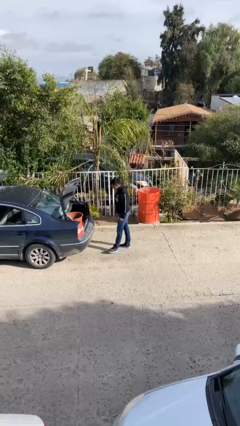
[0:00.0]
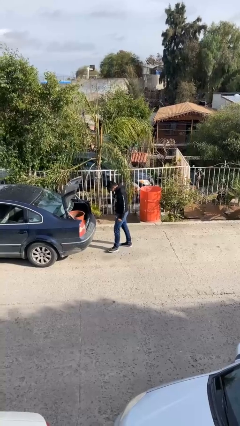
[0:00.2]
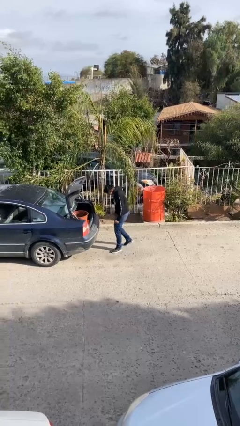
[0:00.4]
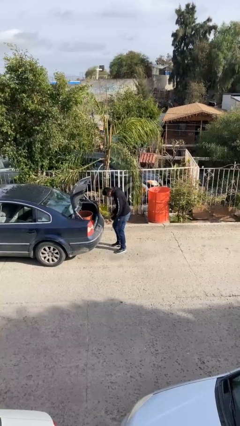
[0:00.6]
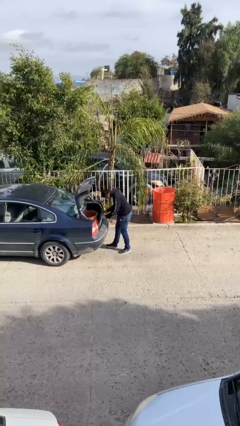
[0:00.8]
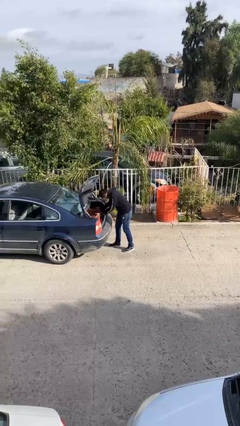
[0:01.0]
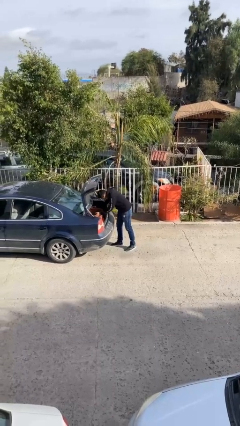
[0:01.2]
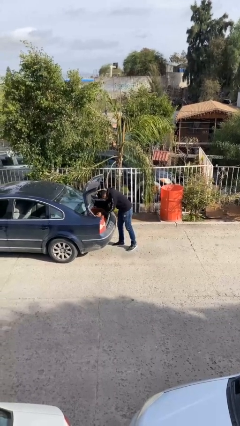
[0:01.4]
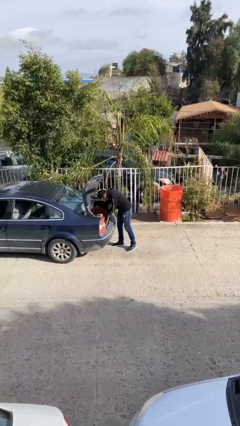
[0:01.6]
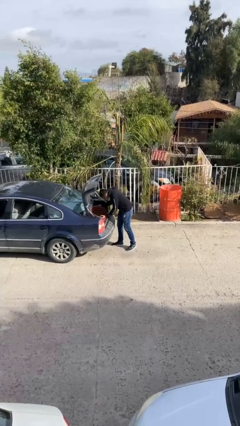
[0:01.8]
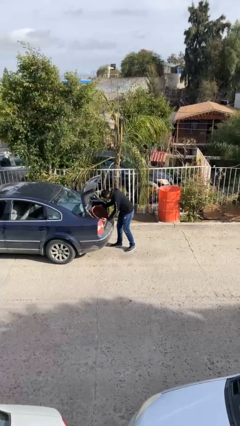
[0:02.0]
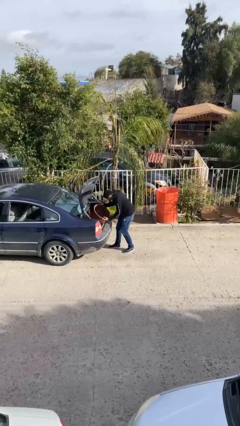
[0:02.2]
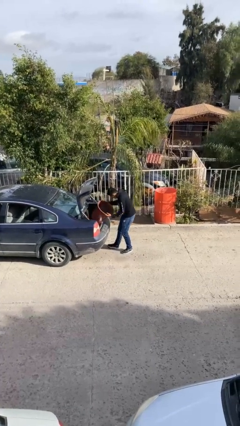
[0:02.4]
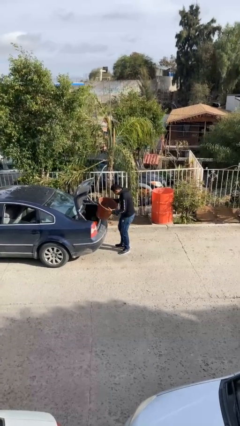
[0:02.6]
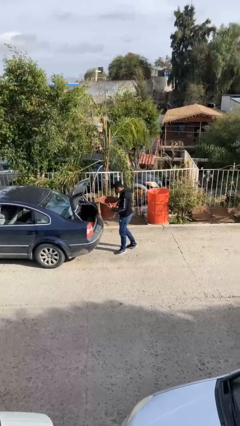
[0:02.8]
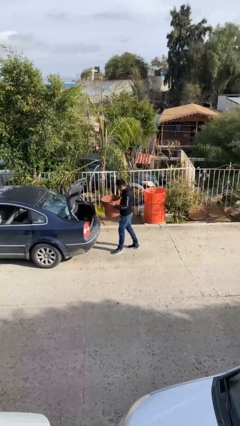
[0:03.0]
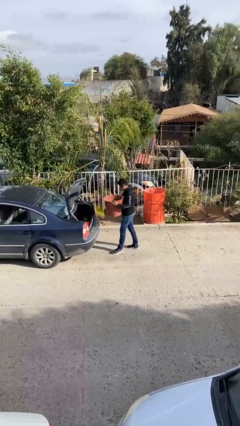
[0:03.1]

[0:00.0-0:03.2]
person unloads car

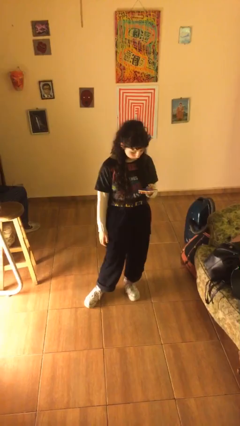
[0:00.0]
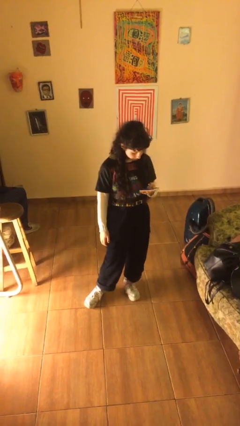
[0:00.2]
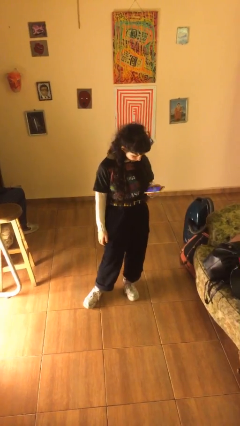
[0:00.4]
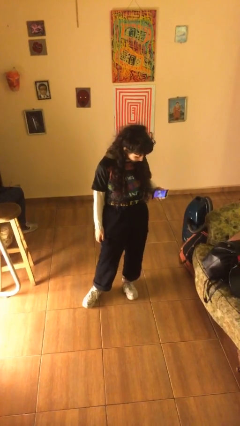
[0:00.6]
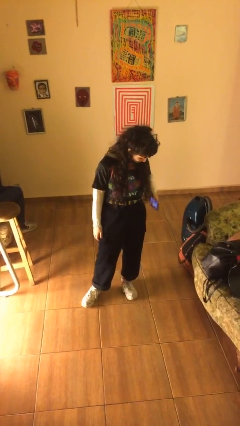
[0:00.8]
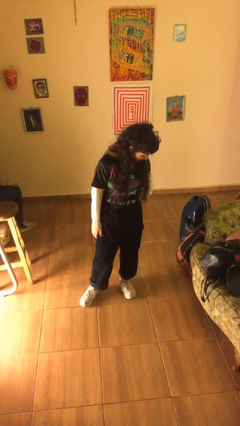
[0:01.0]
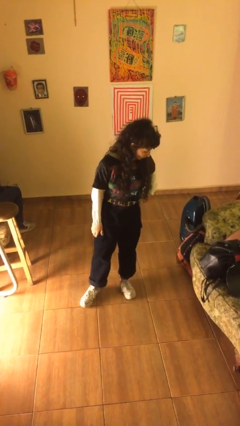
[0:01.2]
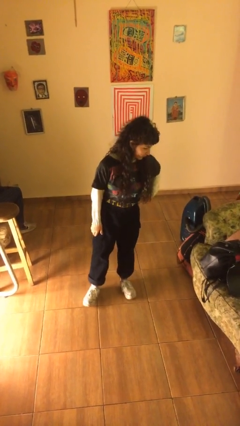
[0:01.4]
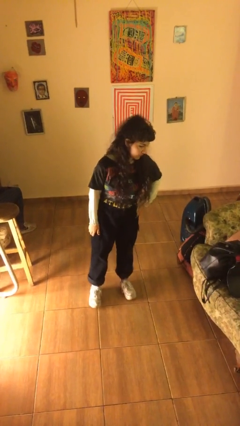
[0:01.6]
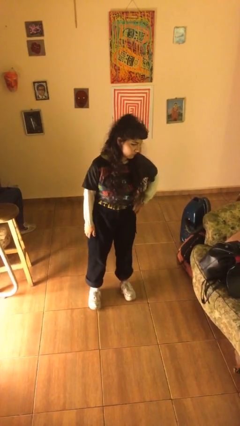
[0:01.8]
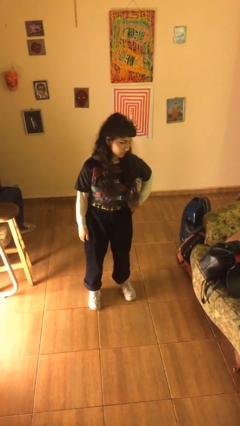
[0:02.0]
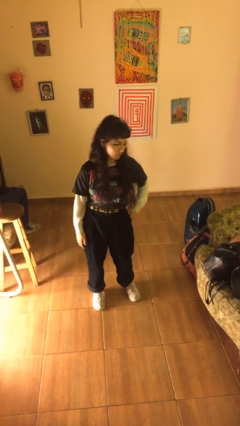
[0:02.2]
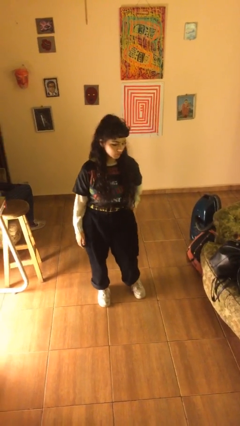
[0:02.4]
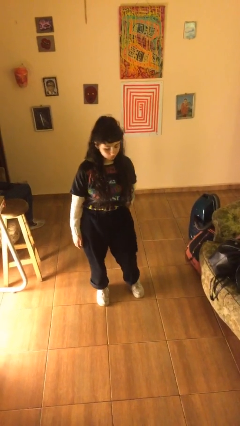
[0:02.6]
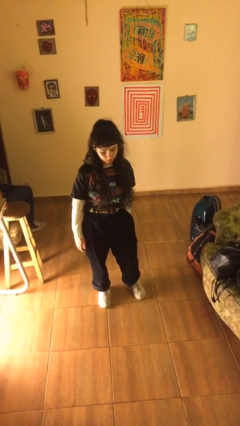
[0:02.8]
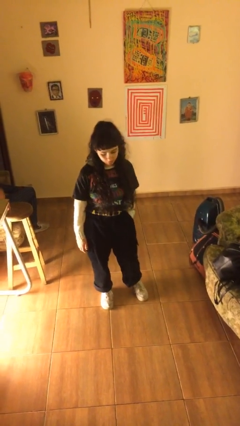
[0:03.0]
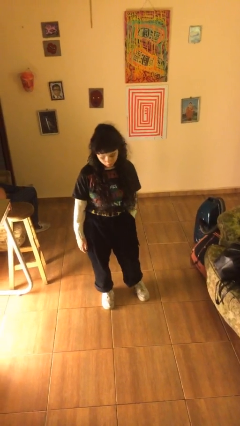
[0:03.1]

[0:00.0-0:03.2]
person puts phone into pocket

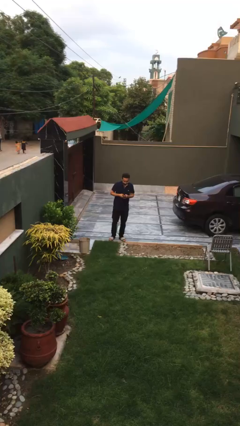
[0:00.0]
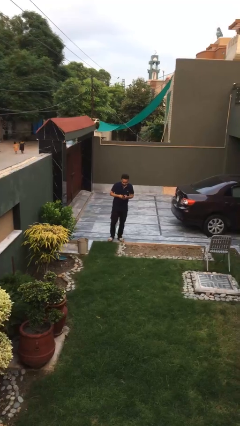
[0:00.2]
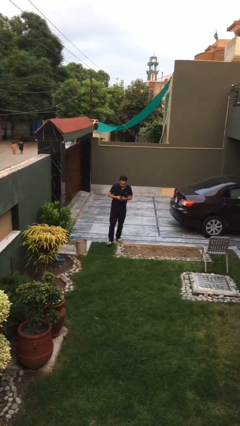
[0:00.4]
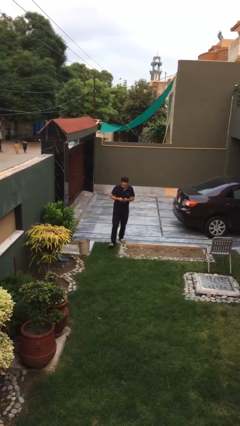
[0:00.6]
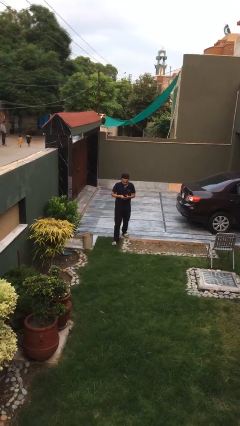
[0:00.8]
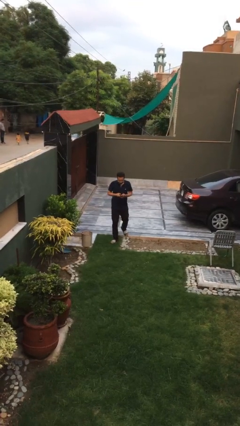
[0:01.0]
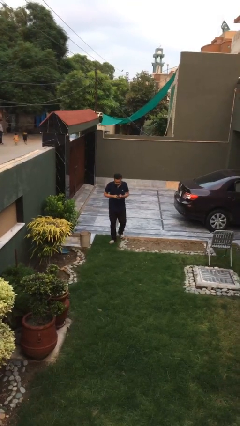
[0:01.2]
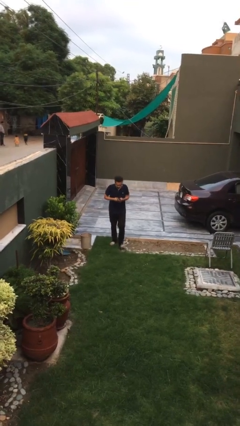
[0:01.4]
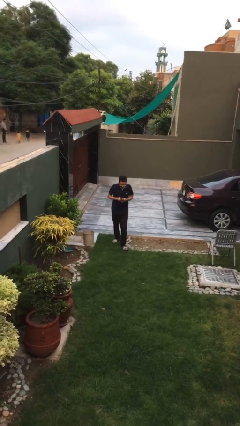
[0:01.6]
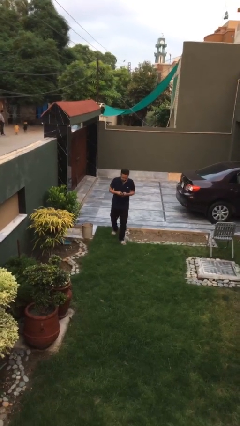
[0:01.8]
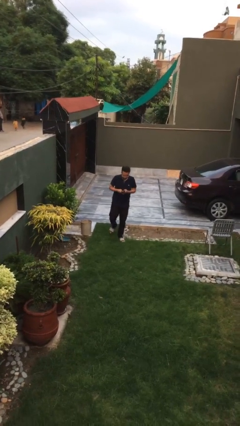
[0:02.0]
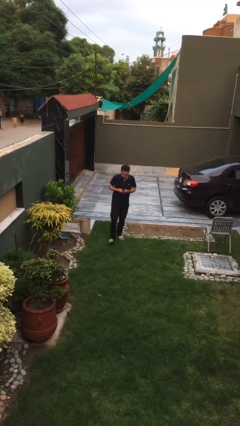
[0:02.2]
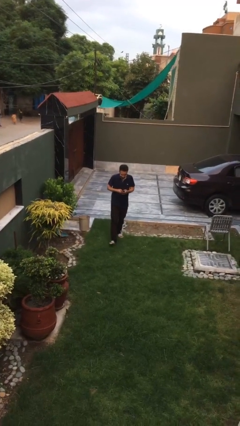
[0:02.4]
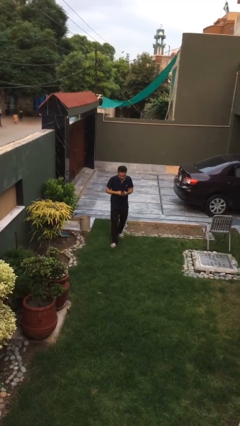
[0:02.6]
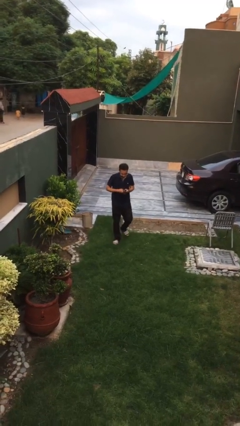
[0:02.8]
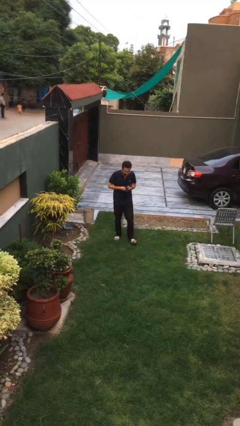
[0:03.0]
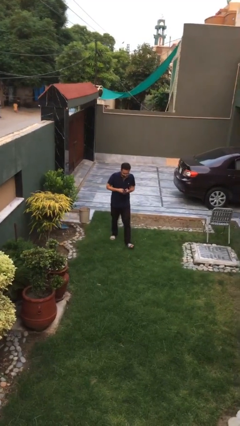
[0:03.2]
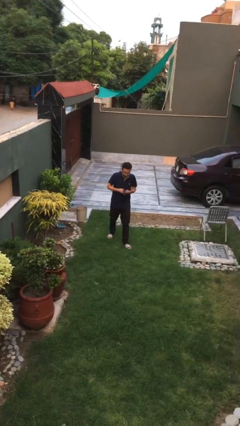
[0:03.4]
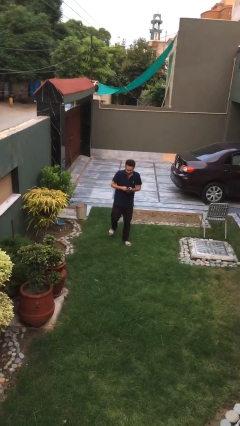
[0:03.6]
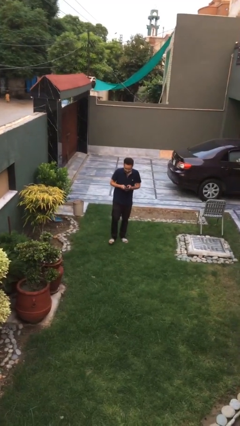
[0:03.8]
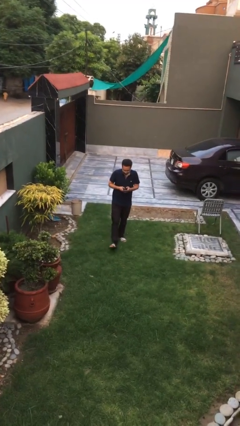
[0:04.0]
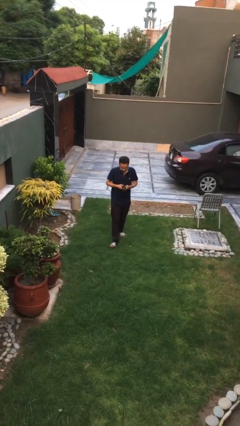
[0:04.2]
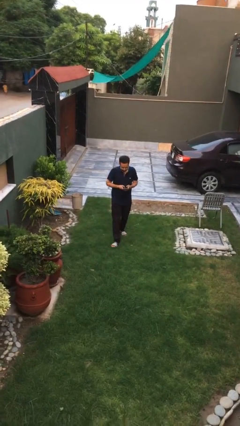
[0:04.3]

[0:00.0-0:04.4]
person texts on phone

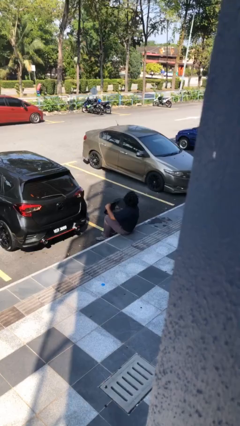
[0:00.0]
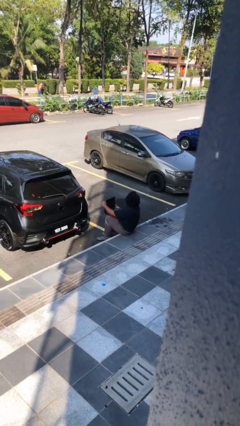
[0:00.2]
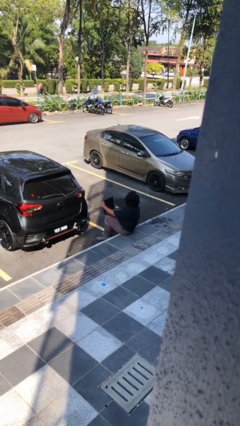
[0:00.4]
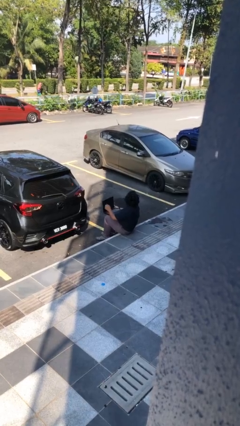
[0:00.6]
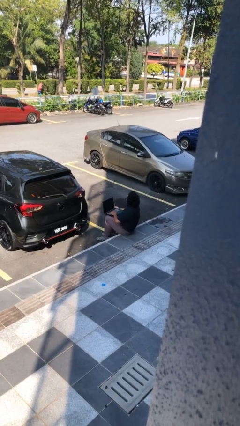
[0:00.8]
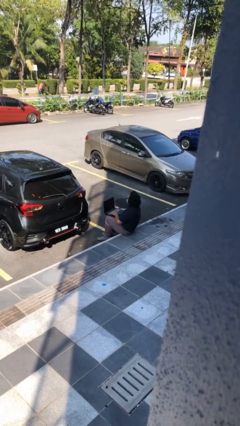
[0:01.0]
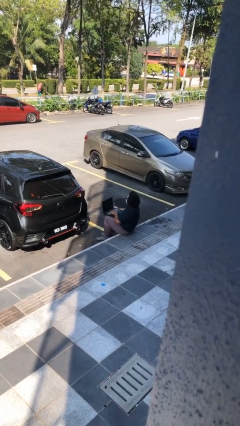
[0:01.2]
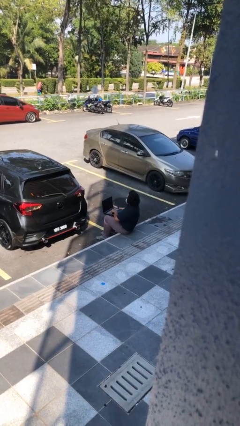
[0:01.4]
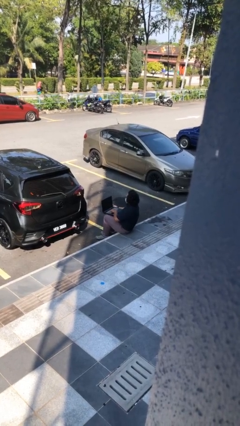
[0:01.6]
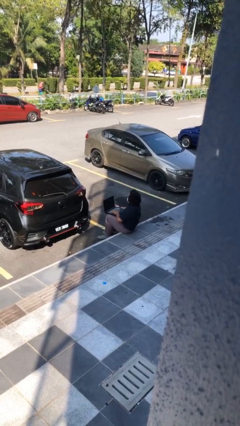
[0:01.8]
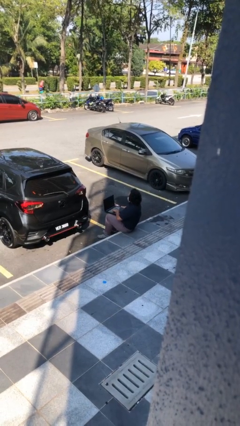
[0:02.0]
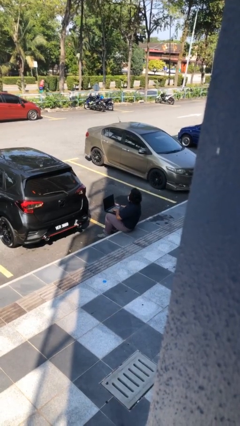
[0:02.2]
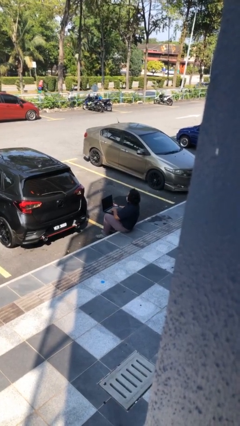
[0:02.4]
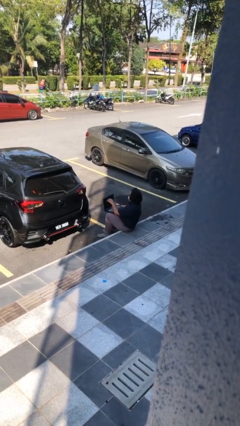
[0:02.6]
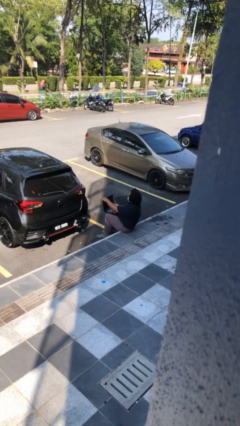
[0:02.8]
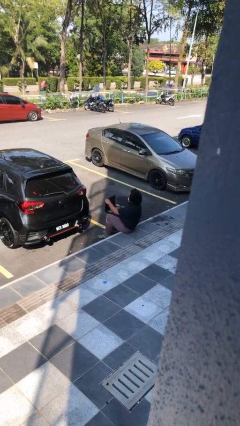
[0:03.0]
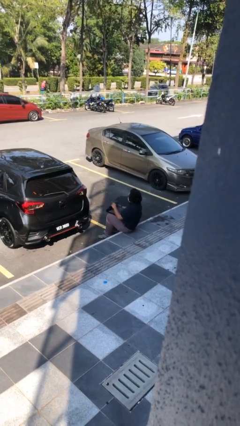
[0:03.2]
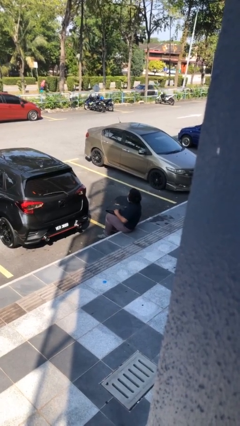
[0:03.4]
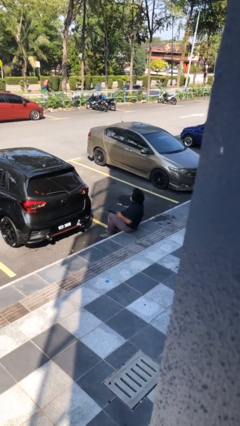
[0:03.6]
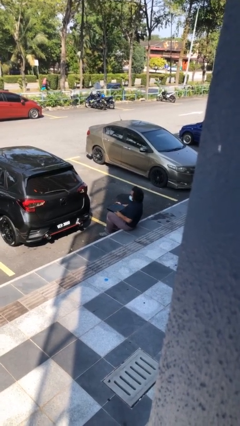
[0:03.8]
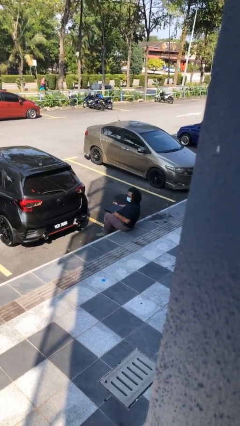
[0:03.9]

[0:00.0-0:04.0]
person interacts with laptop

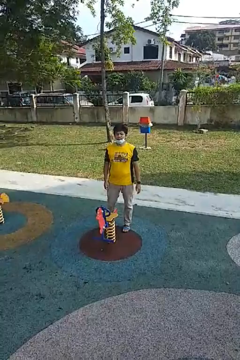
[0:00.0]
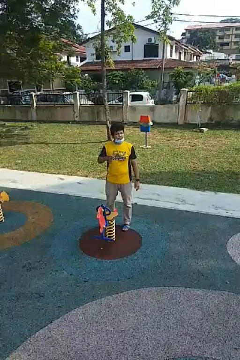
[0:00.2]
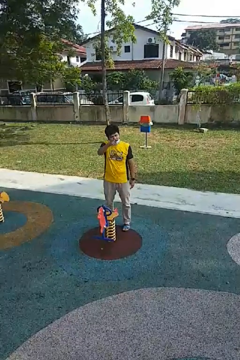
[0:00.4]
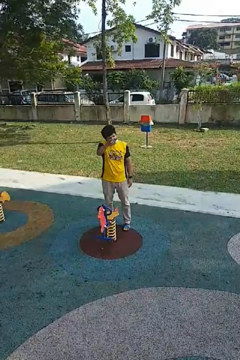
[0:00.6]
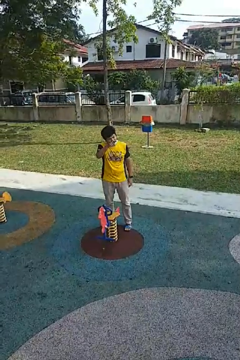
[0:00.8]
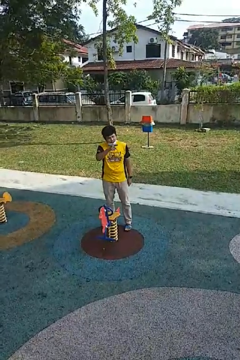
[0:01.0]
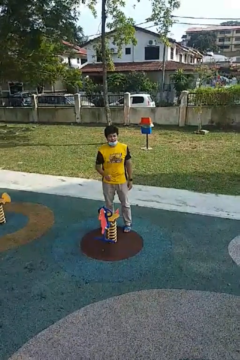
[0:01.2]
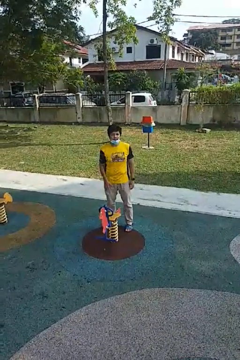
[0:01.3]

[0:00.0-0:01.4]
person points at person

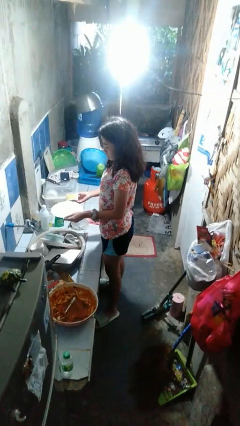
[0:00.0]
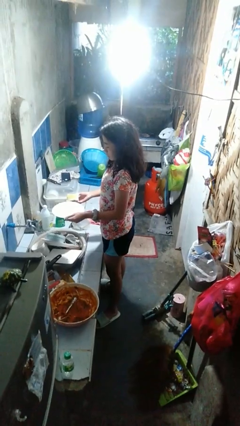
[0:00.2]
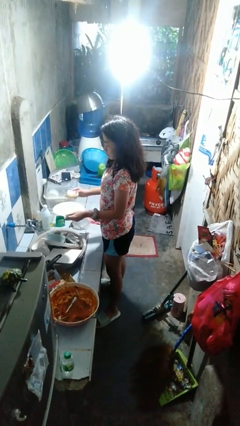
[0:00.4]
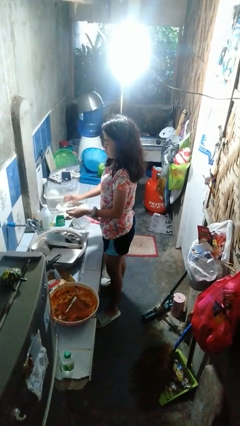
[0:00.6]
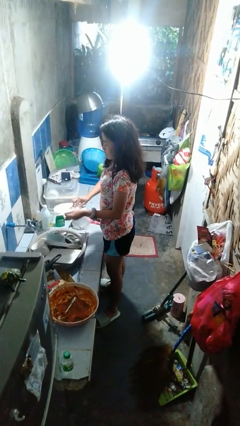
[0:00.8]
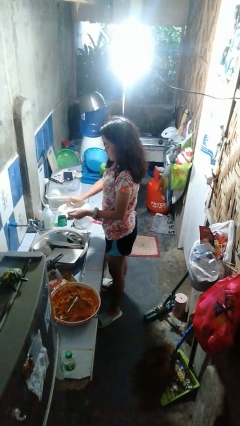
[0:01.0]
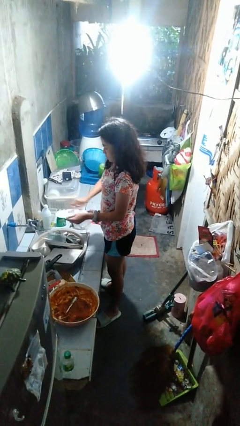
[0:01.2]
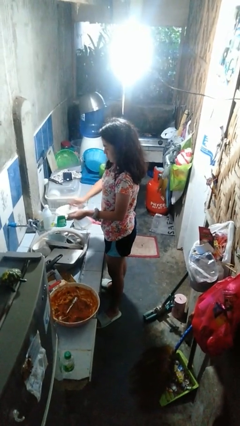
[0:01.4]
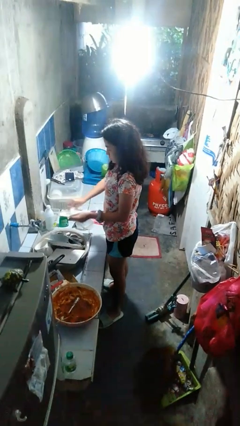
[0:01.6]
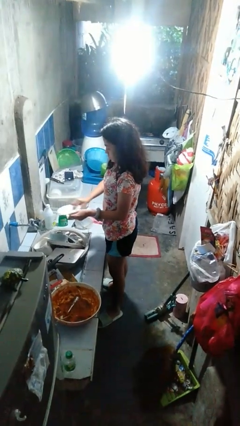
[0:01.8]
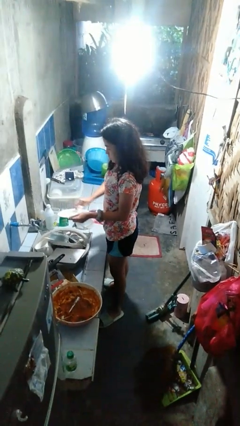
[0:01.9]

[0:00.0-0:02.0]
person washes dish
